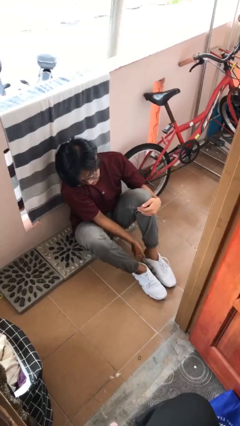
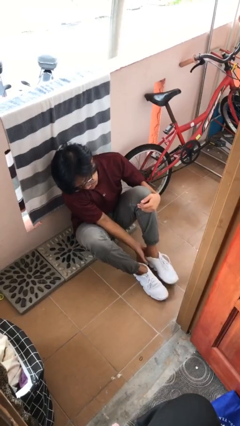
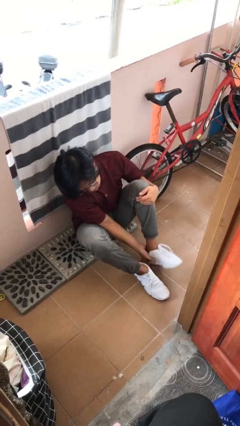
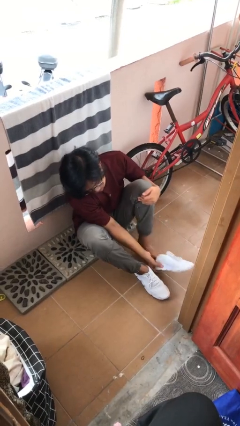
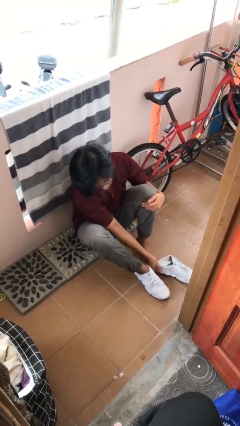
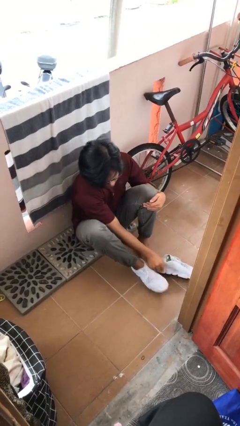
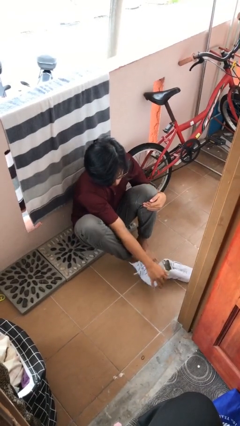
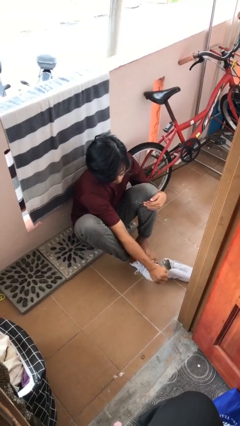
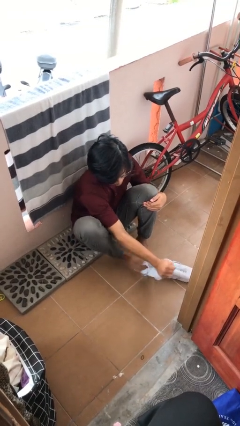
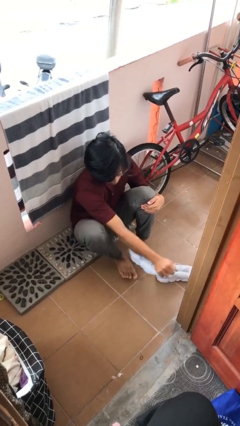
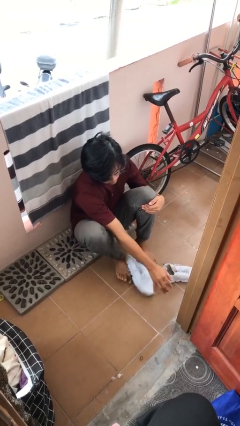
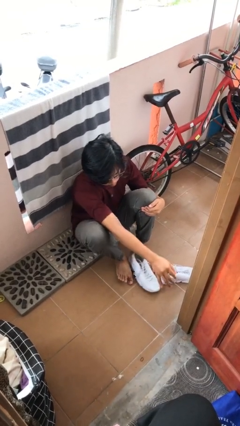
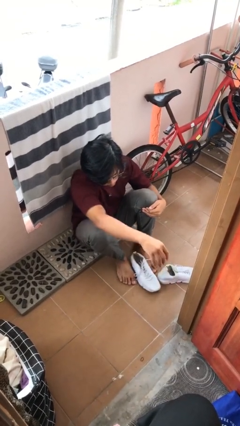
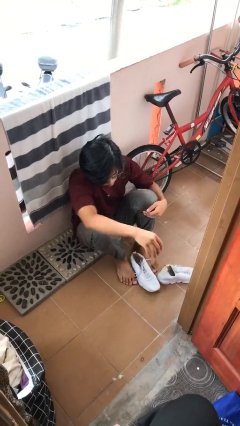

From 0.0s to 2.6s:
person takes off shoes

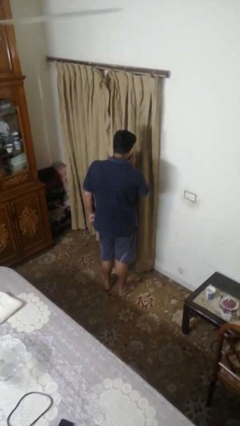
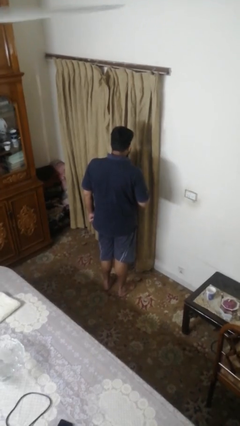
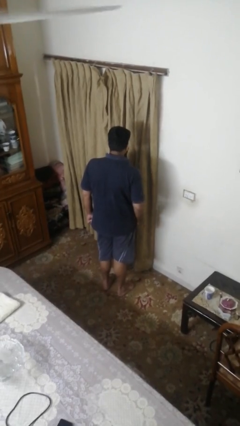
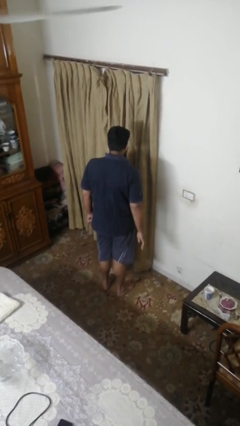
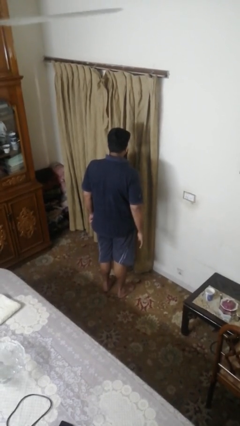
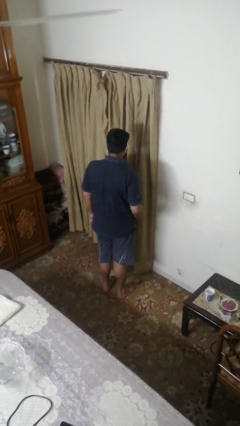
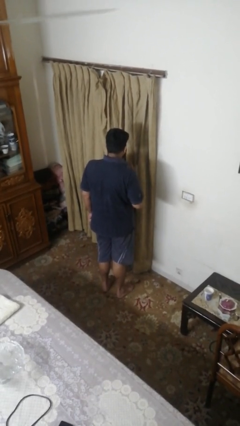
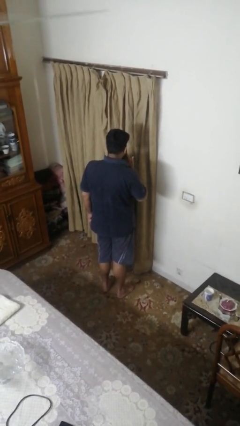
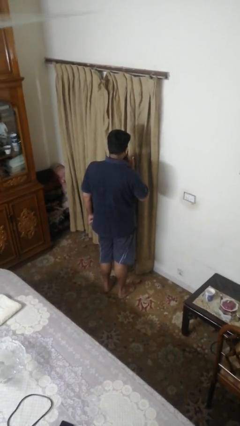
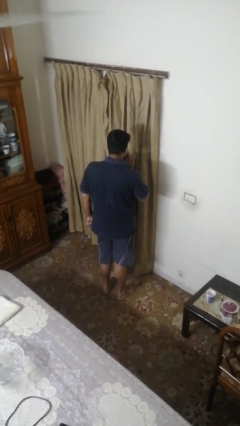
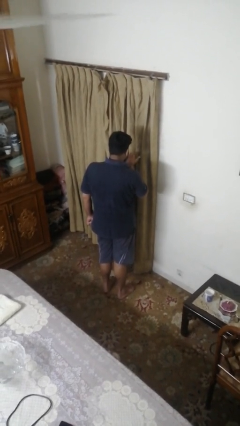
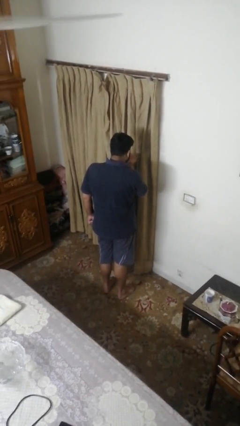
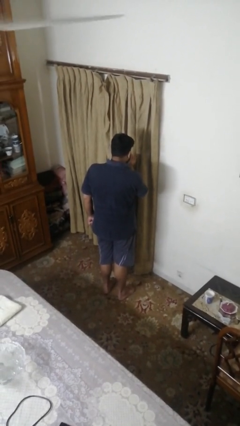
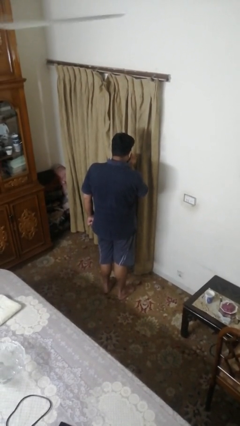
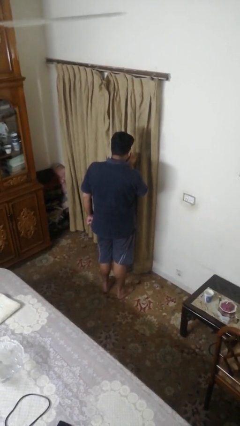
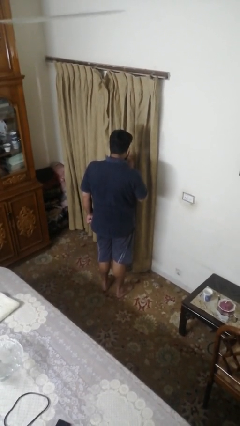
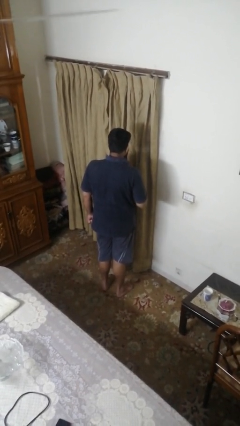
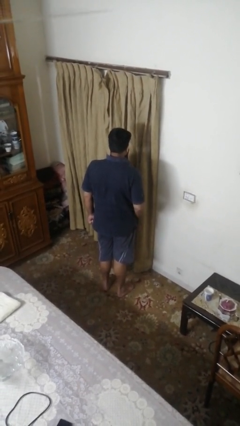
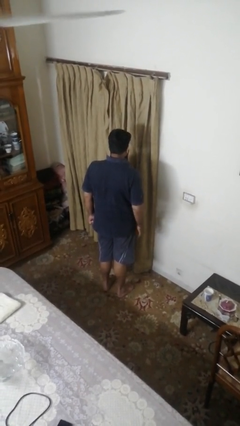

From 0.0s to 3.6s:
person gestures blow kiss

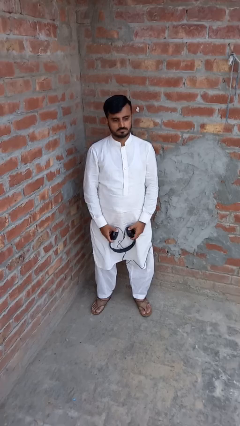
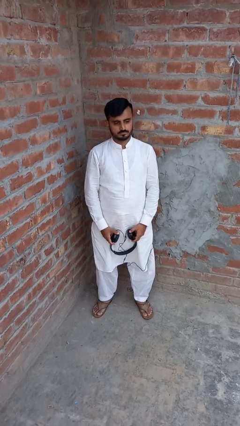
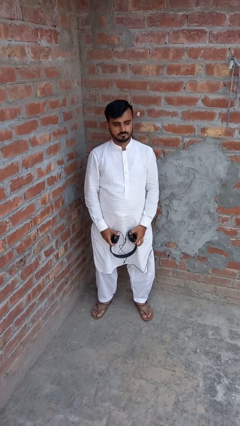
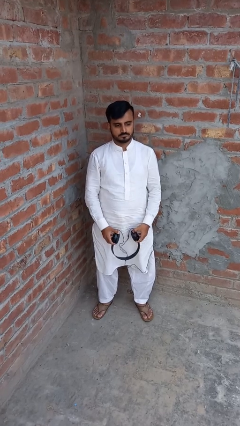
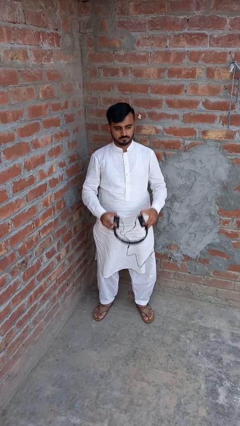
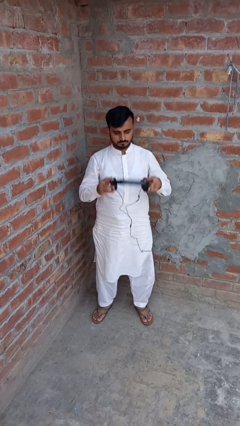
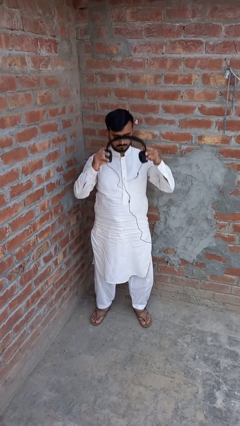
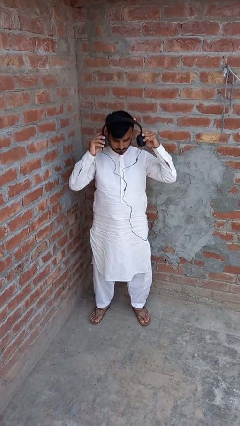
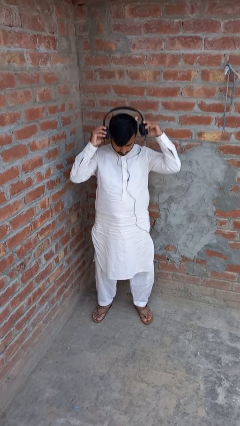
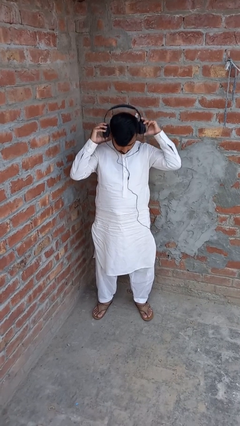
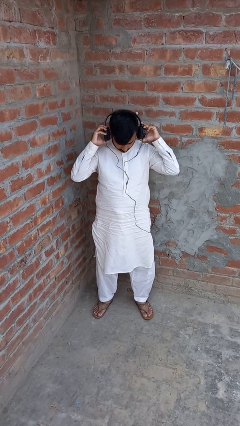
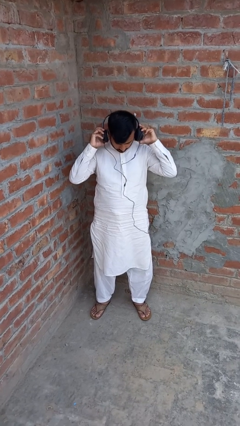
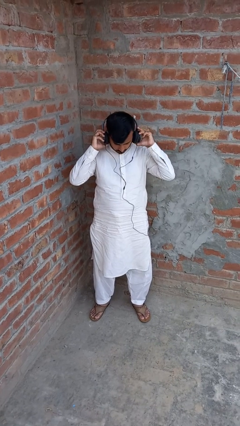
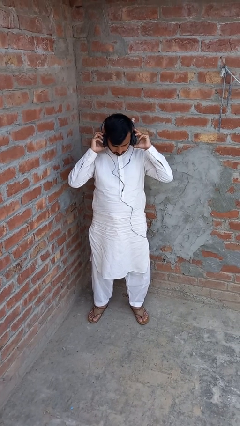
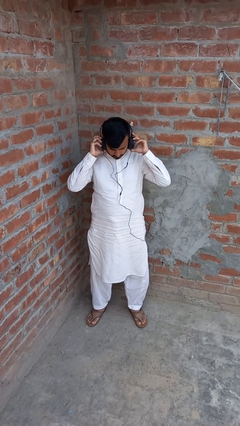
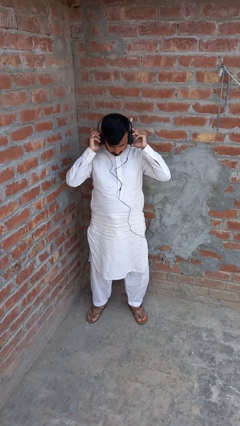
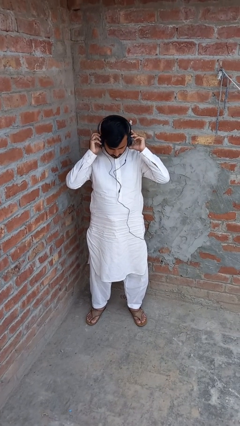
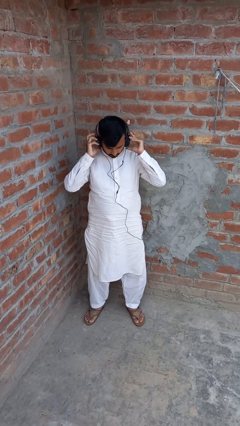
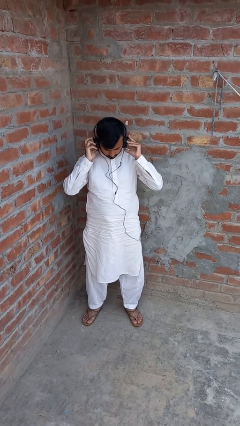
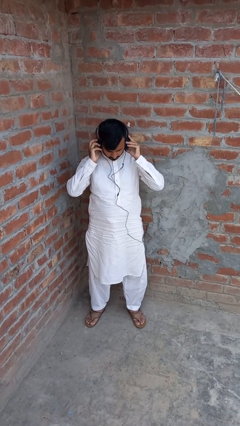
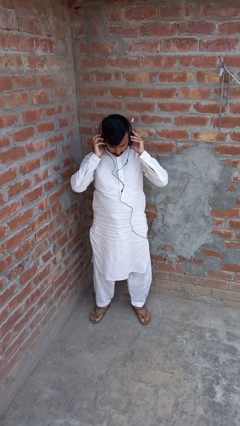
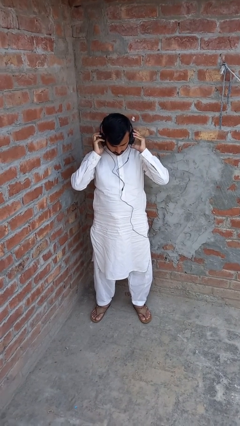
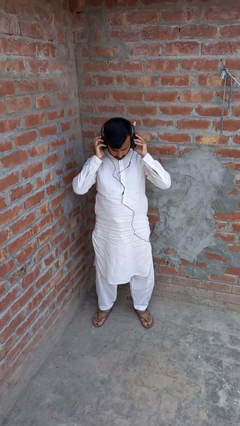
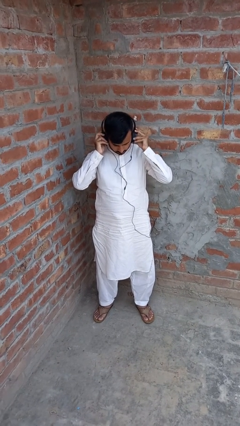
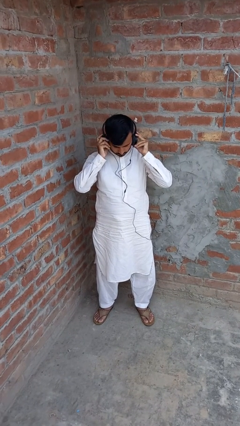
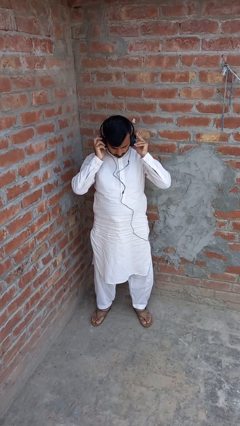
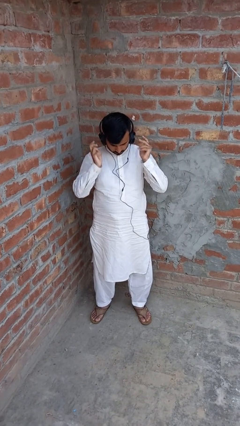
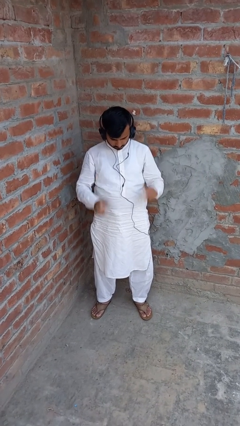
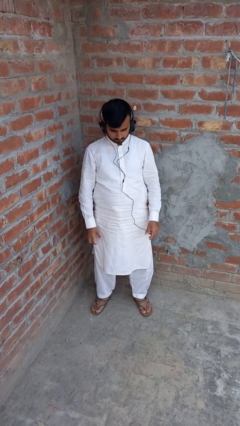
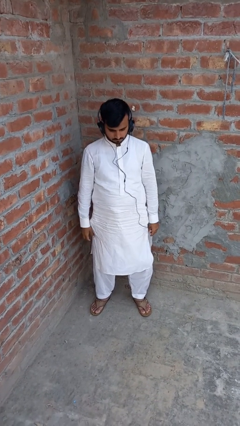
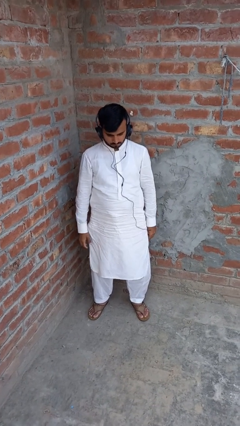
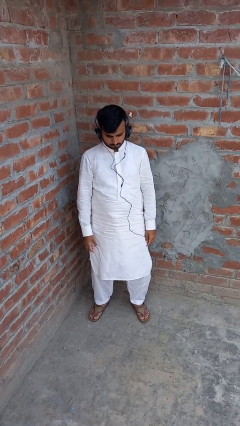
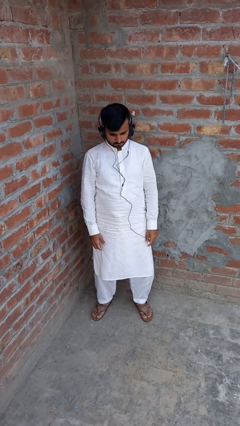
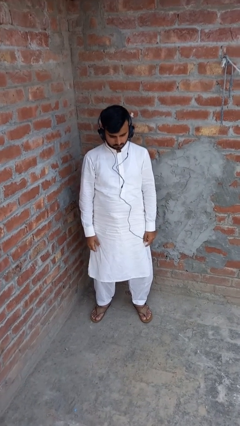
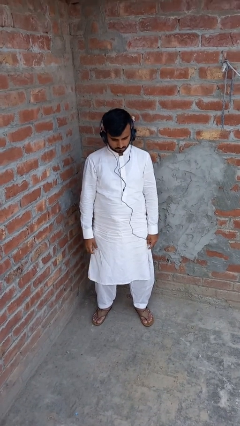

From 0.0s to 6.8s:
person puts on headphones

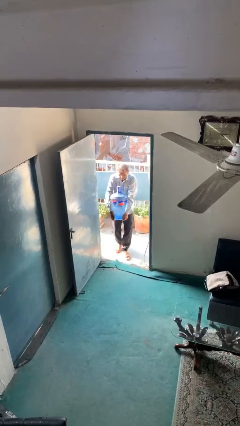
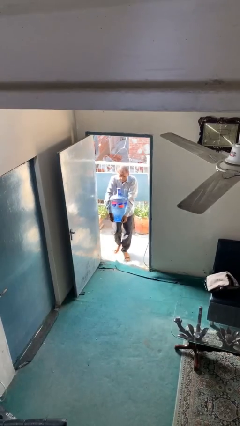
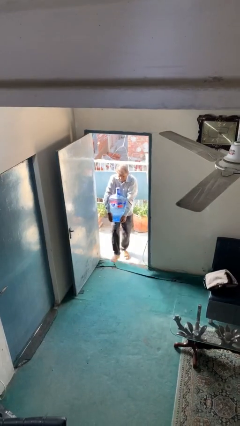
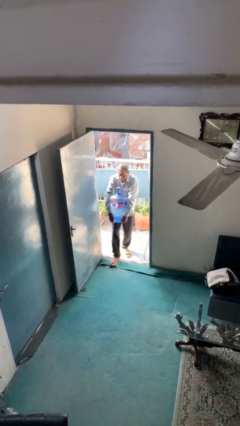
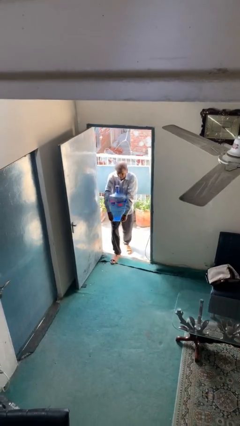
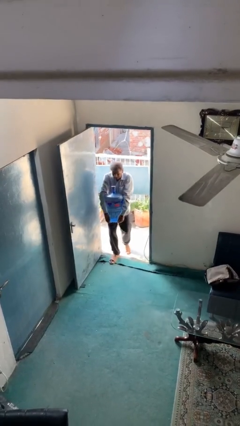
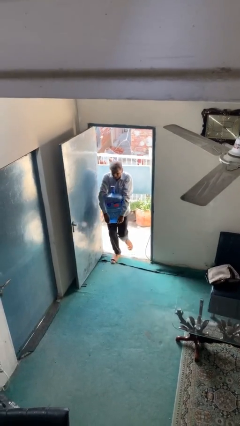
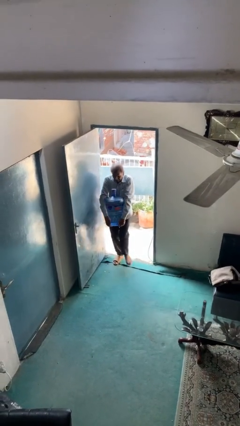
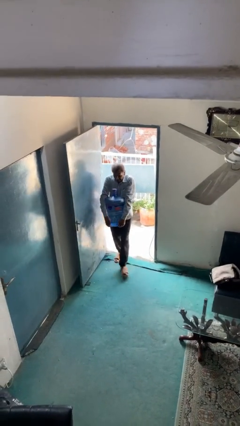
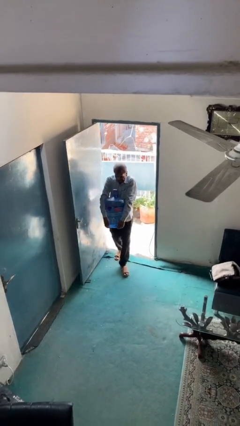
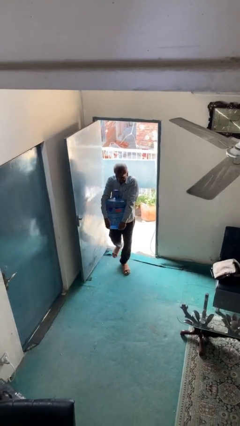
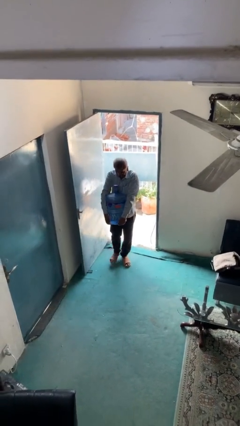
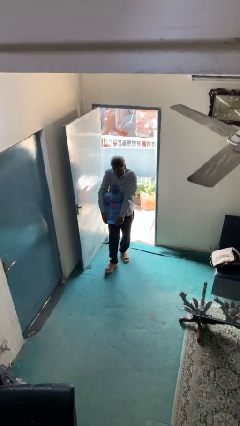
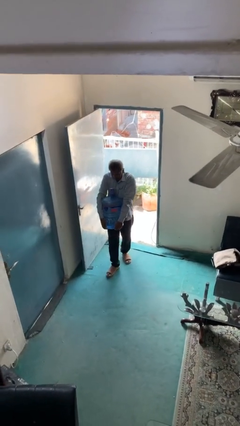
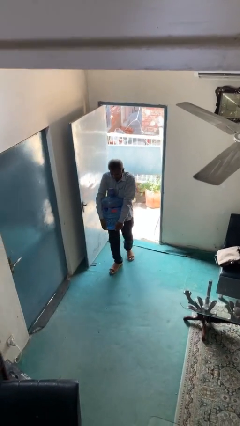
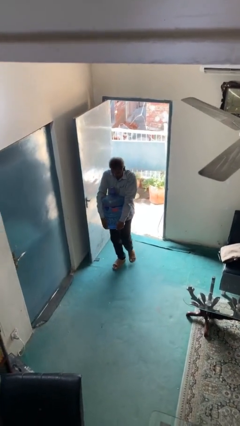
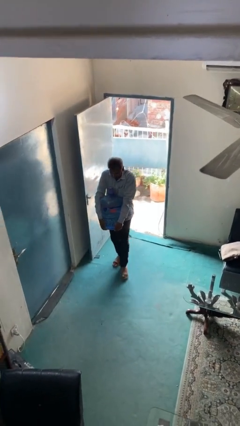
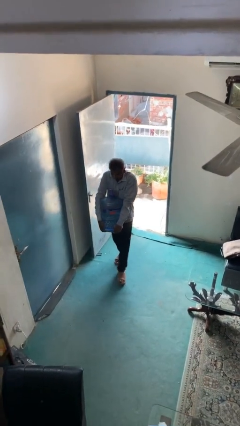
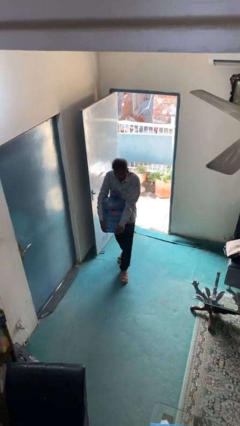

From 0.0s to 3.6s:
person carries heavy object

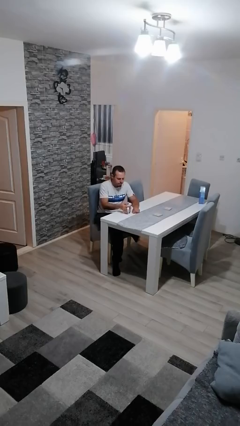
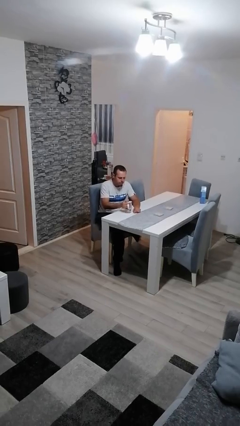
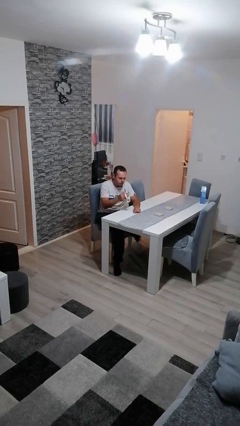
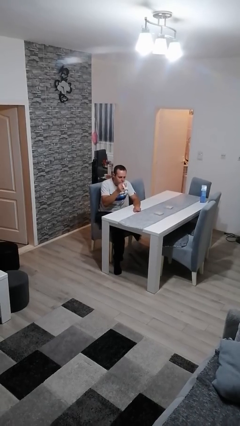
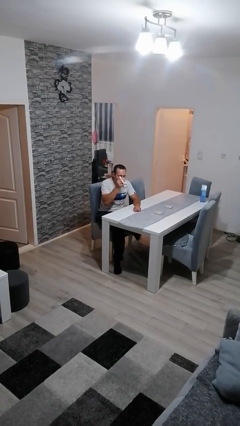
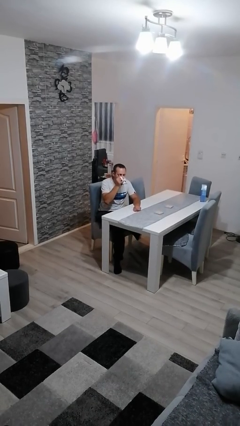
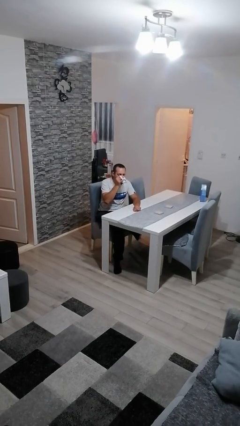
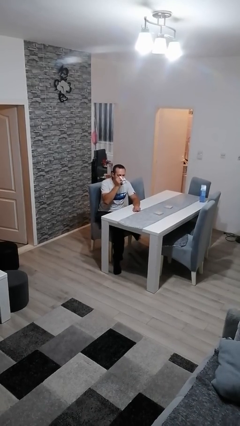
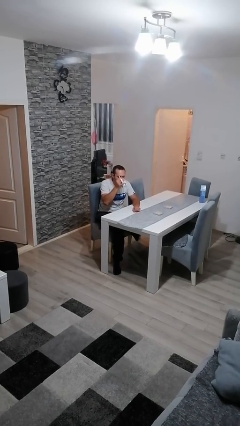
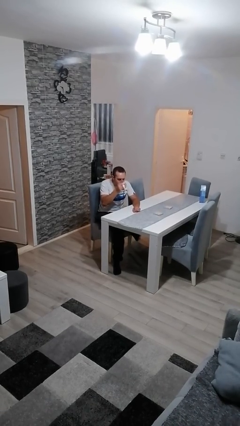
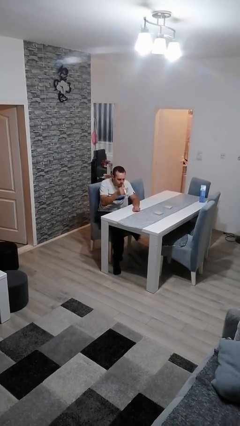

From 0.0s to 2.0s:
person drinks from mug
